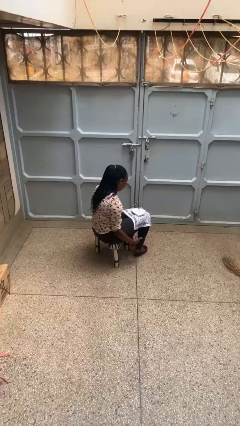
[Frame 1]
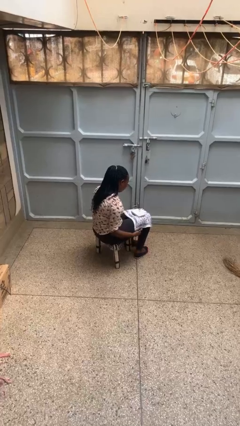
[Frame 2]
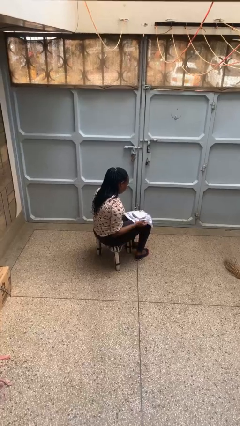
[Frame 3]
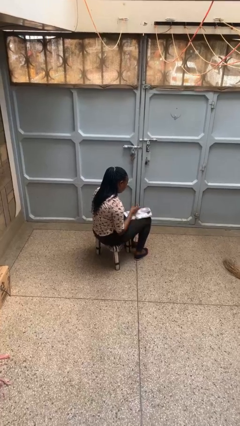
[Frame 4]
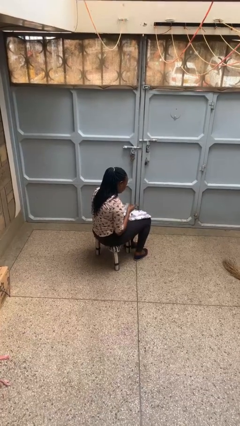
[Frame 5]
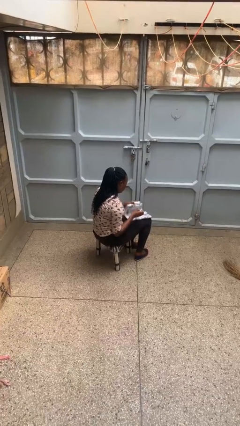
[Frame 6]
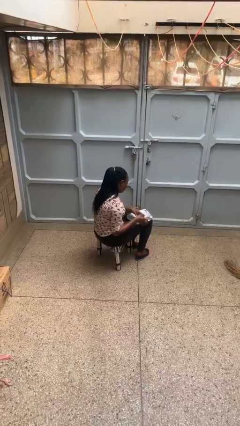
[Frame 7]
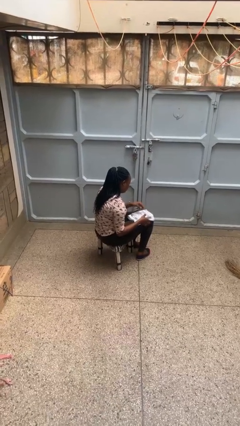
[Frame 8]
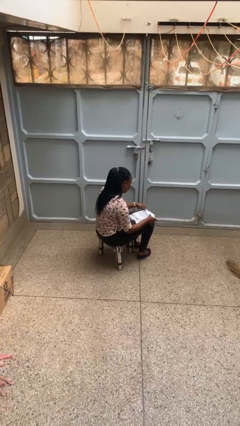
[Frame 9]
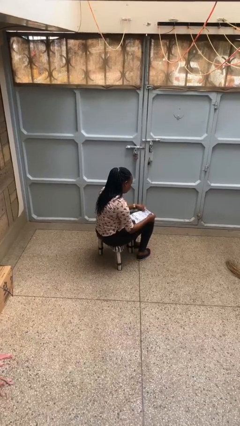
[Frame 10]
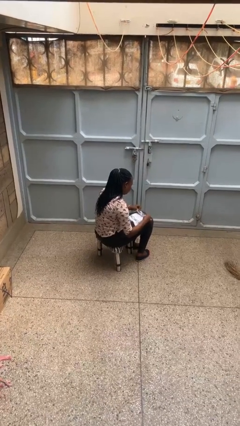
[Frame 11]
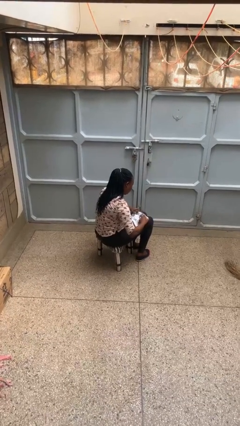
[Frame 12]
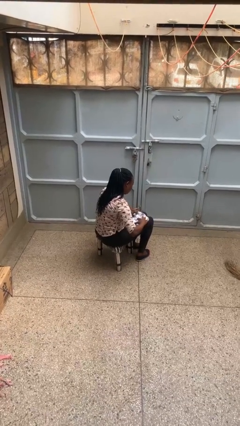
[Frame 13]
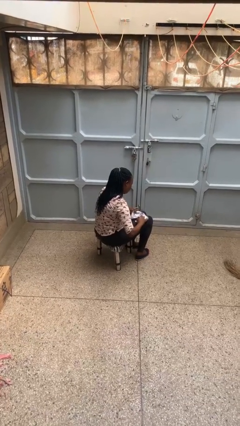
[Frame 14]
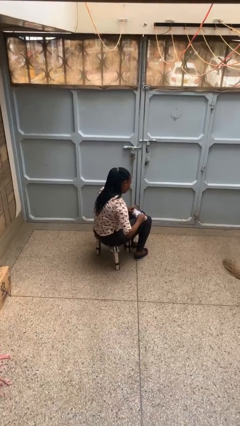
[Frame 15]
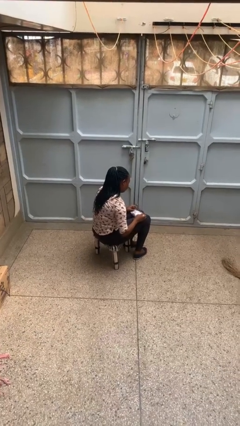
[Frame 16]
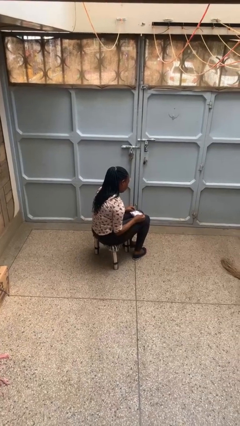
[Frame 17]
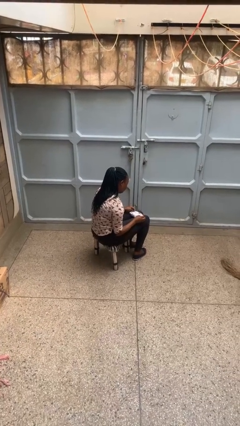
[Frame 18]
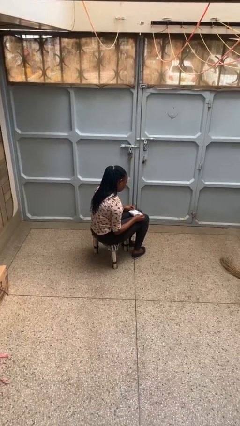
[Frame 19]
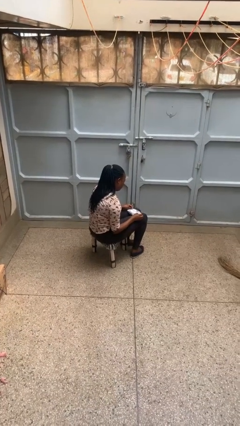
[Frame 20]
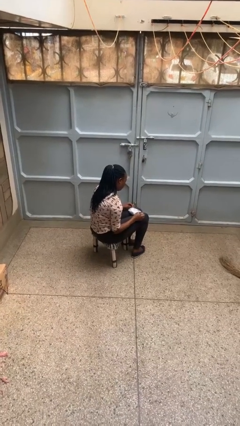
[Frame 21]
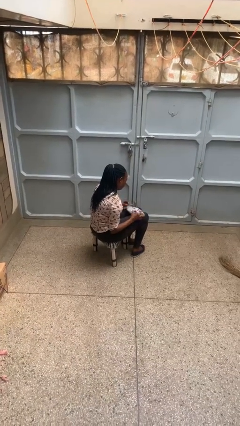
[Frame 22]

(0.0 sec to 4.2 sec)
person wraps box

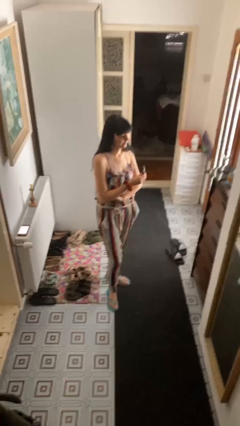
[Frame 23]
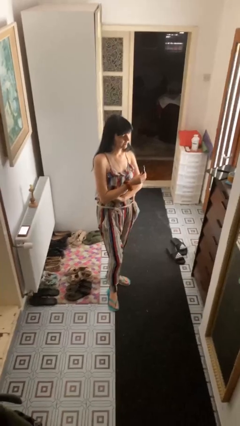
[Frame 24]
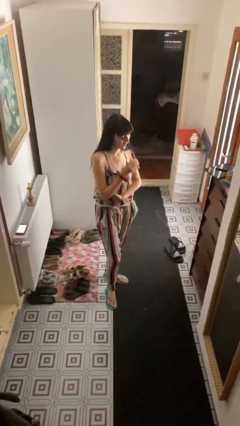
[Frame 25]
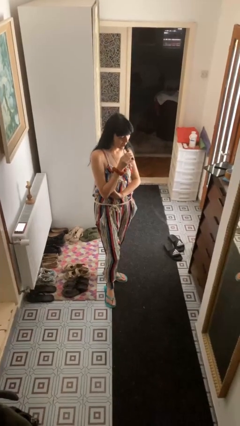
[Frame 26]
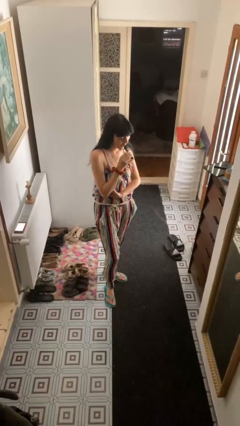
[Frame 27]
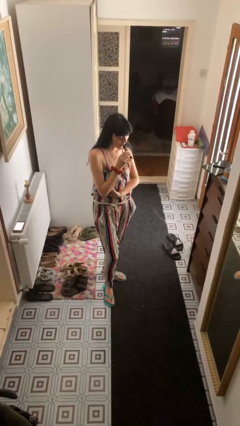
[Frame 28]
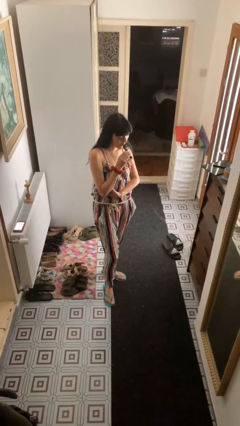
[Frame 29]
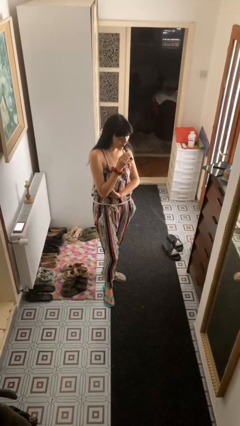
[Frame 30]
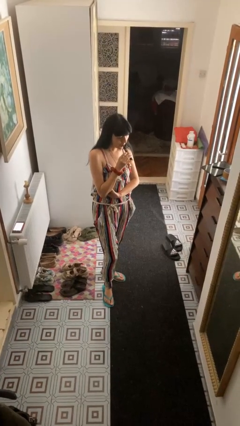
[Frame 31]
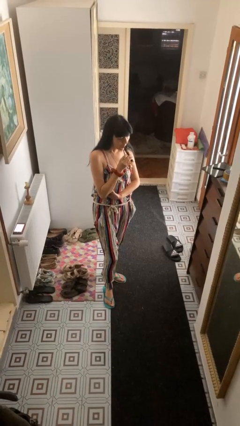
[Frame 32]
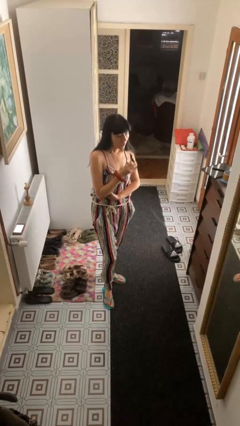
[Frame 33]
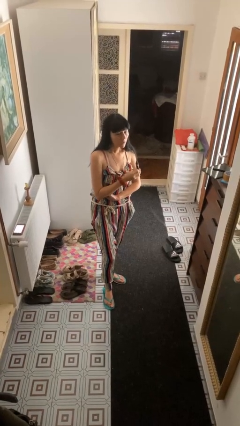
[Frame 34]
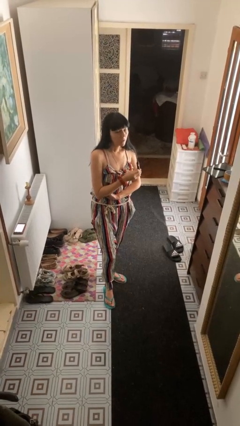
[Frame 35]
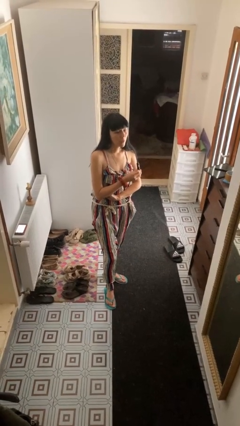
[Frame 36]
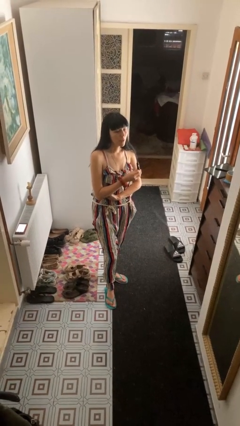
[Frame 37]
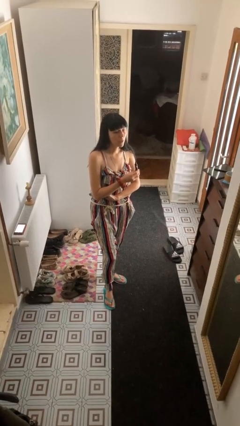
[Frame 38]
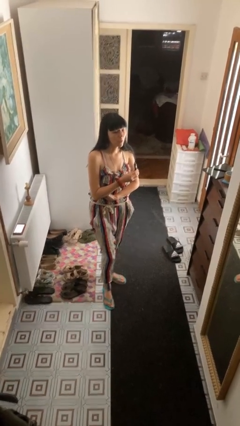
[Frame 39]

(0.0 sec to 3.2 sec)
person vapes

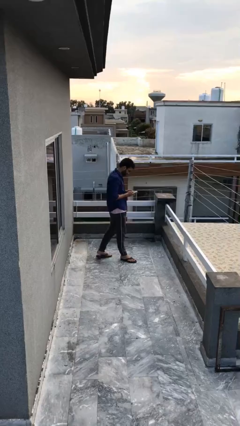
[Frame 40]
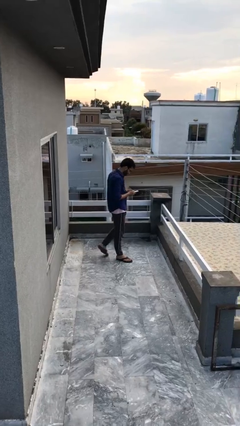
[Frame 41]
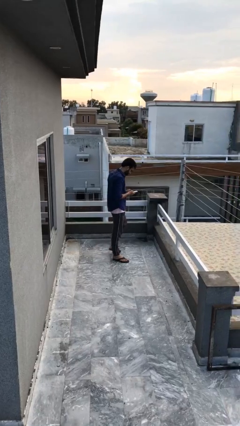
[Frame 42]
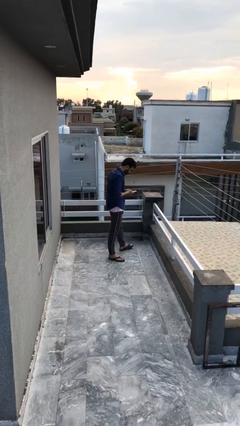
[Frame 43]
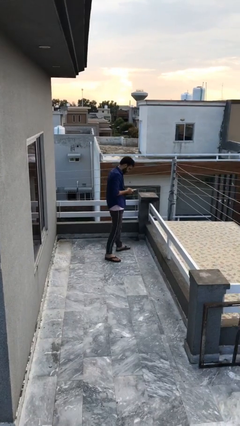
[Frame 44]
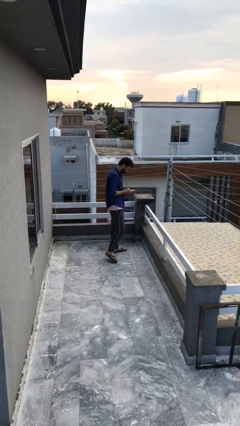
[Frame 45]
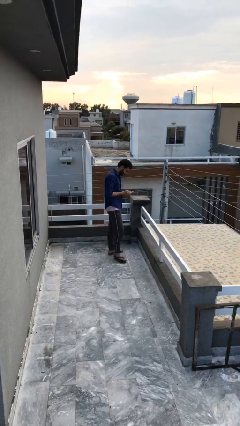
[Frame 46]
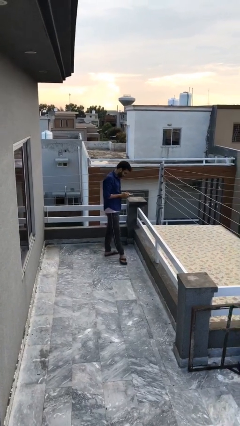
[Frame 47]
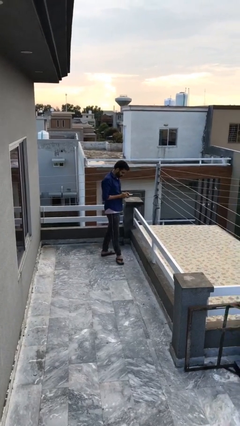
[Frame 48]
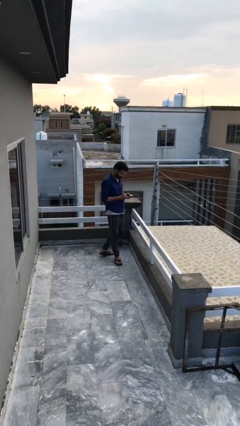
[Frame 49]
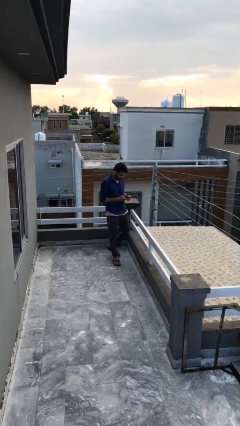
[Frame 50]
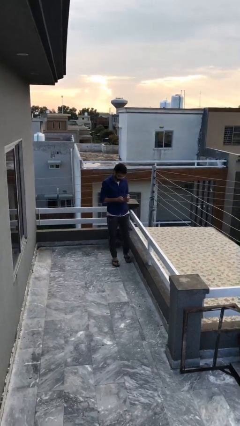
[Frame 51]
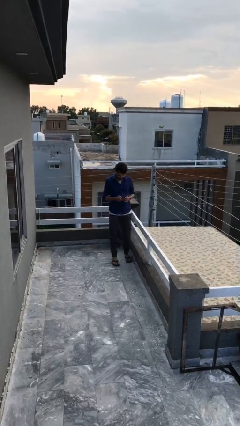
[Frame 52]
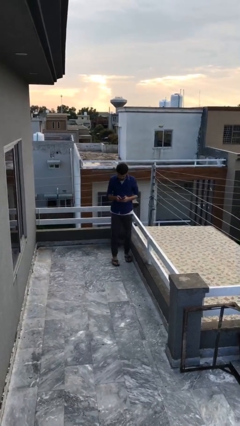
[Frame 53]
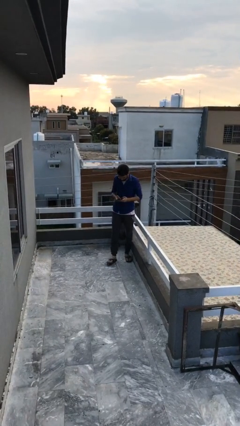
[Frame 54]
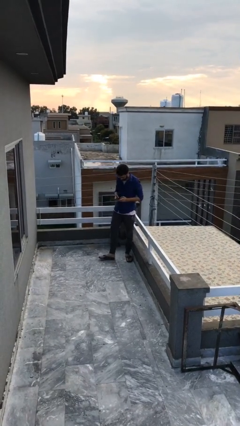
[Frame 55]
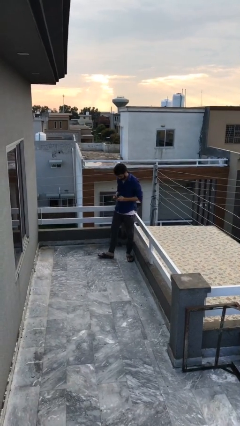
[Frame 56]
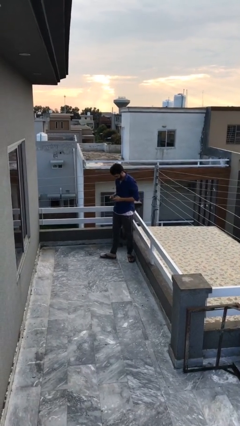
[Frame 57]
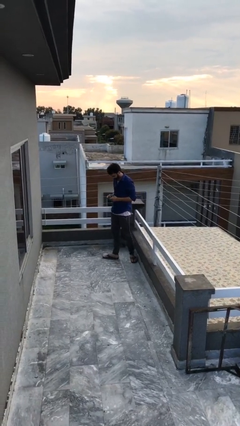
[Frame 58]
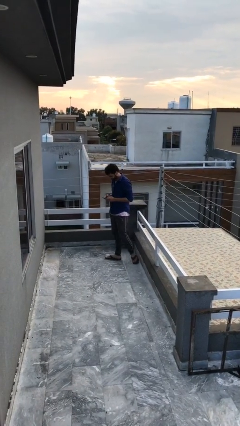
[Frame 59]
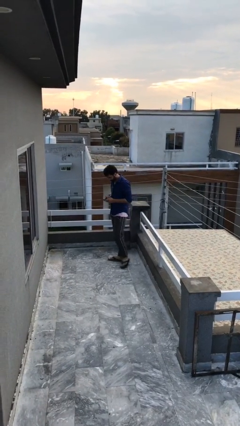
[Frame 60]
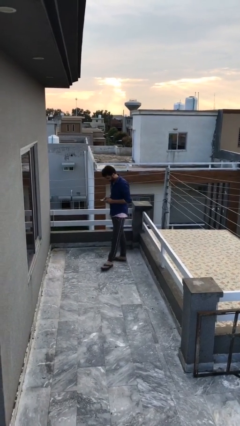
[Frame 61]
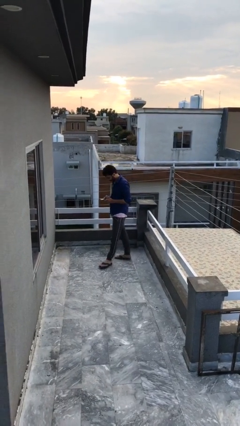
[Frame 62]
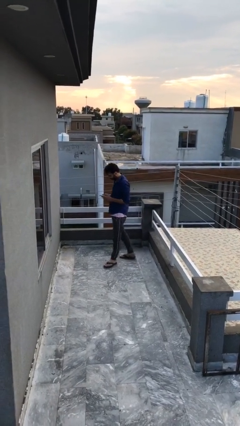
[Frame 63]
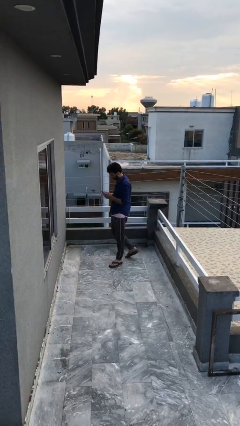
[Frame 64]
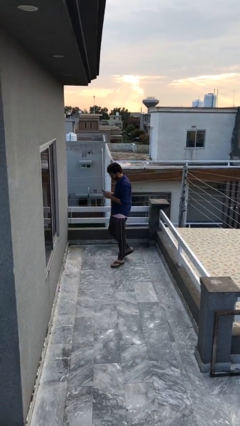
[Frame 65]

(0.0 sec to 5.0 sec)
person texts on phone

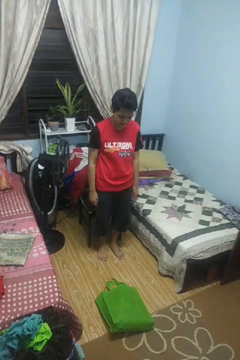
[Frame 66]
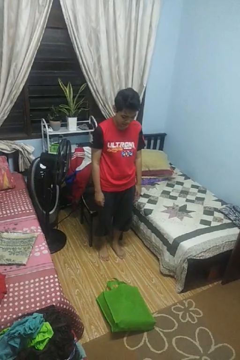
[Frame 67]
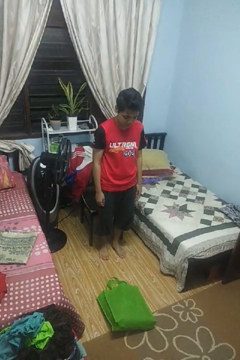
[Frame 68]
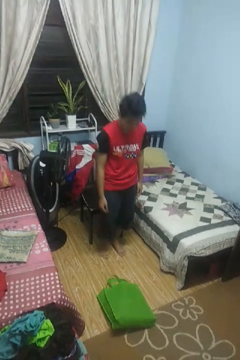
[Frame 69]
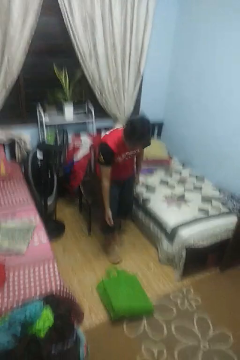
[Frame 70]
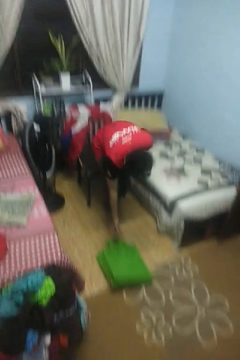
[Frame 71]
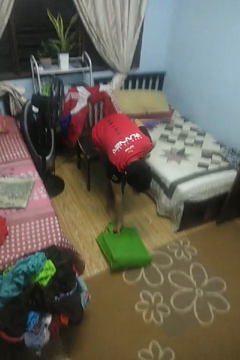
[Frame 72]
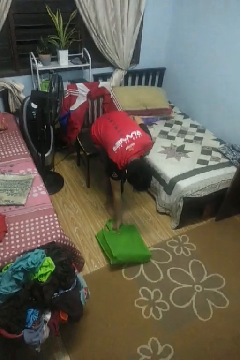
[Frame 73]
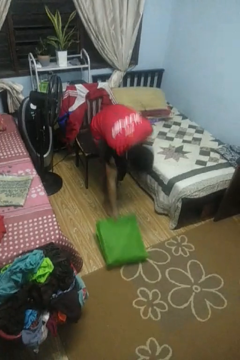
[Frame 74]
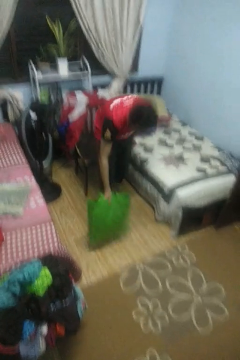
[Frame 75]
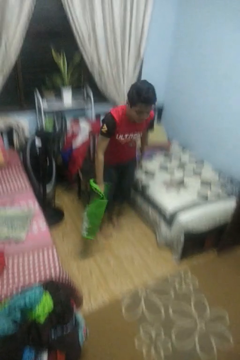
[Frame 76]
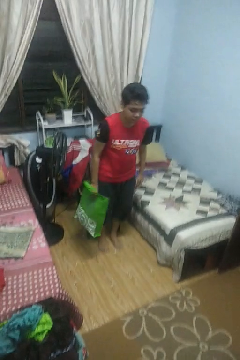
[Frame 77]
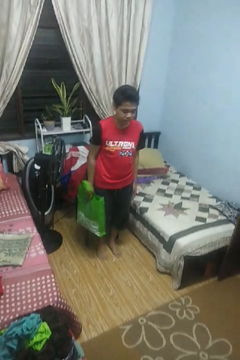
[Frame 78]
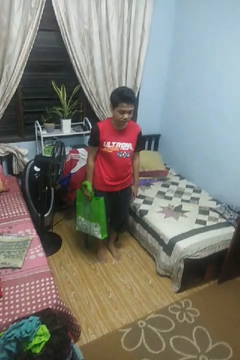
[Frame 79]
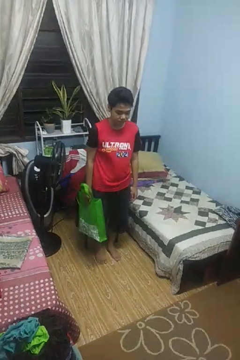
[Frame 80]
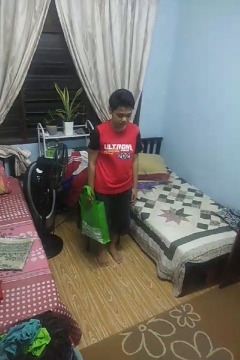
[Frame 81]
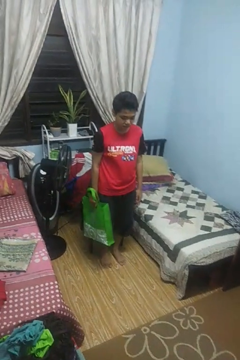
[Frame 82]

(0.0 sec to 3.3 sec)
person picks up object from floor

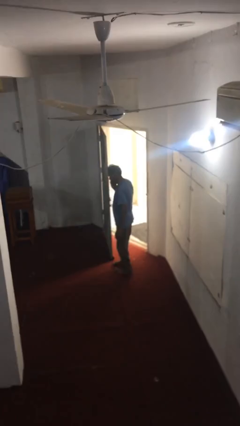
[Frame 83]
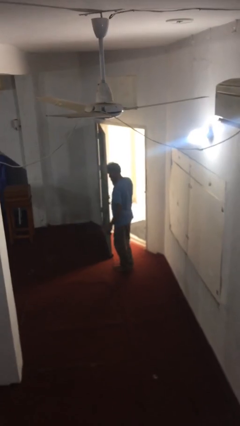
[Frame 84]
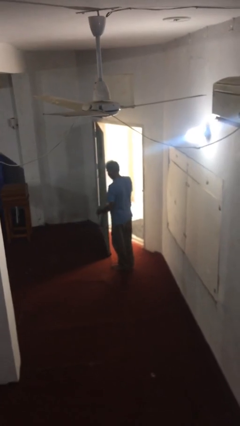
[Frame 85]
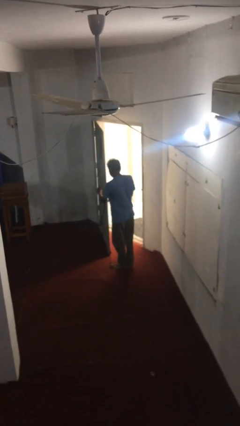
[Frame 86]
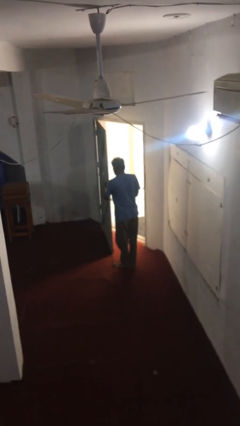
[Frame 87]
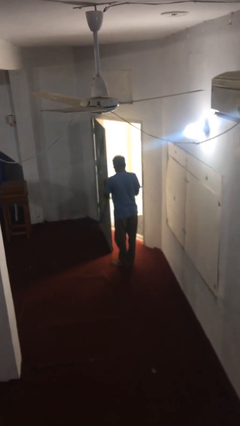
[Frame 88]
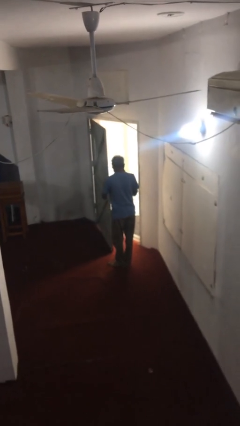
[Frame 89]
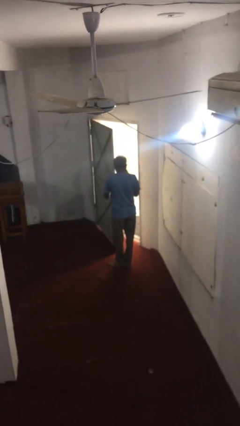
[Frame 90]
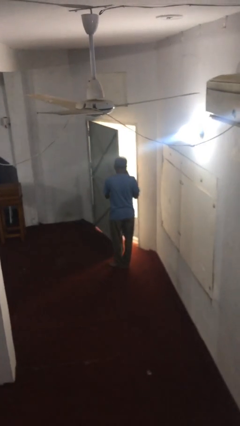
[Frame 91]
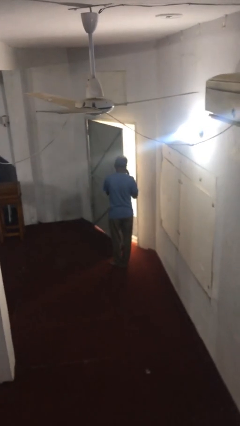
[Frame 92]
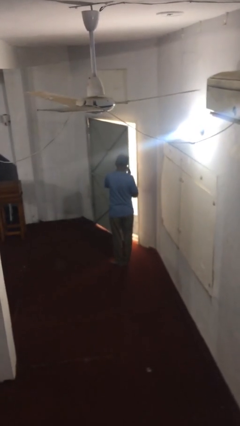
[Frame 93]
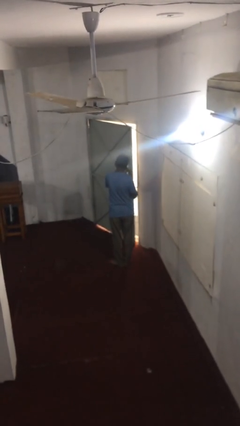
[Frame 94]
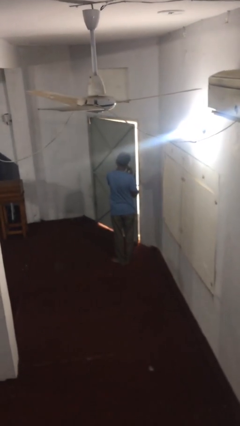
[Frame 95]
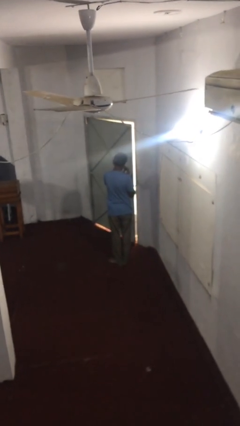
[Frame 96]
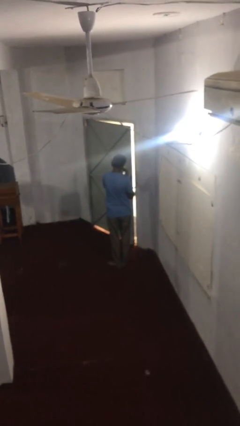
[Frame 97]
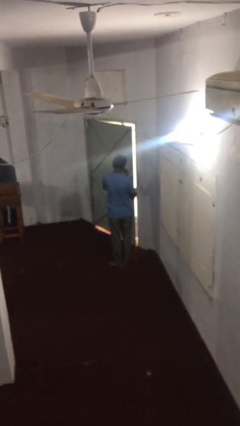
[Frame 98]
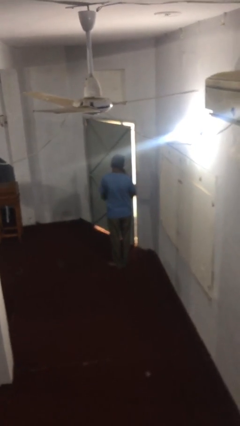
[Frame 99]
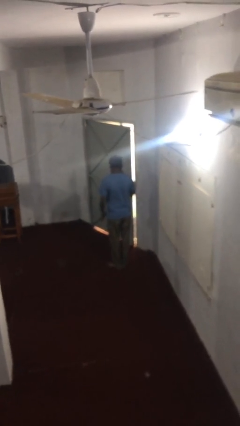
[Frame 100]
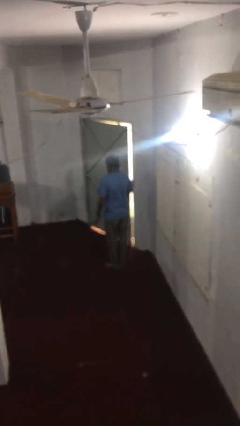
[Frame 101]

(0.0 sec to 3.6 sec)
person closes facility door
